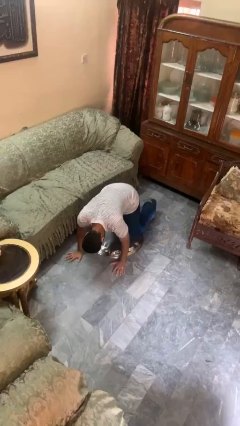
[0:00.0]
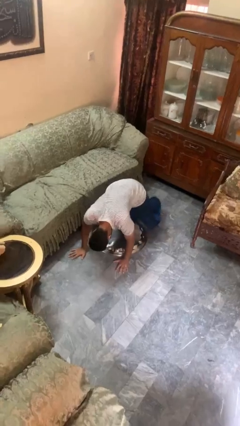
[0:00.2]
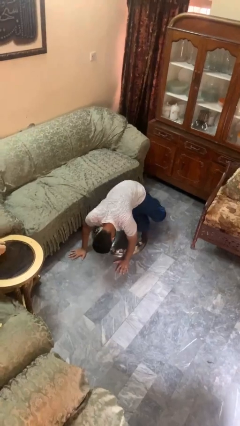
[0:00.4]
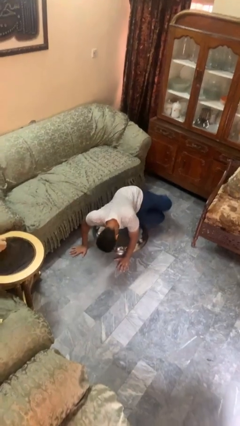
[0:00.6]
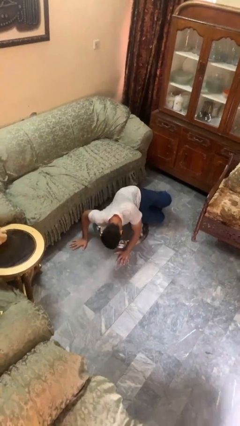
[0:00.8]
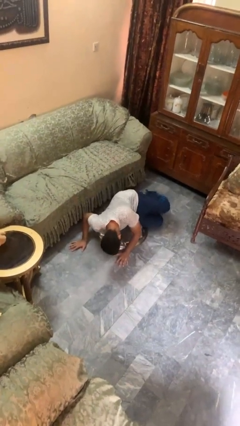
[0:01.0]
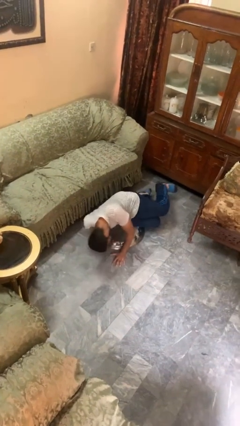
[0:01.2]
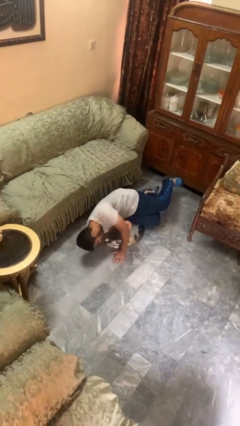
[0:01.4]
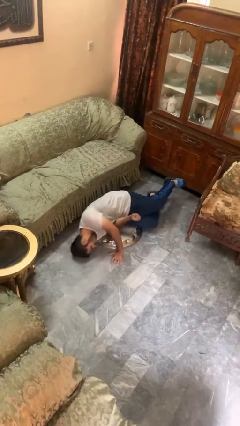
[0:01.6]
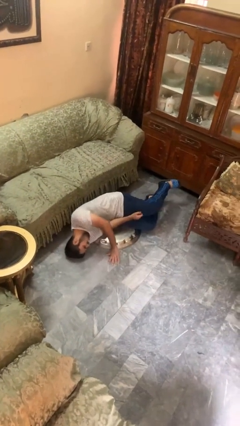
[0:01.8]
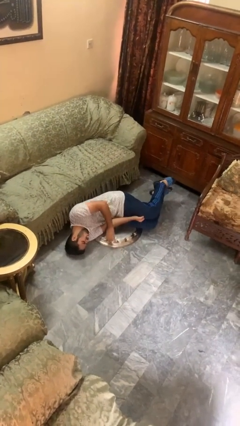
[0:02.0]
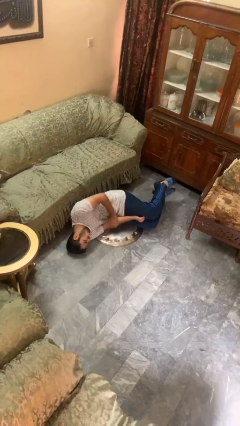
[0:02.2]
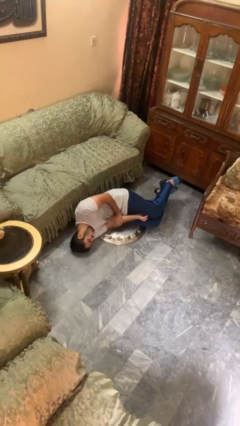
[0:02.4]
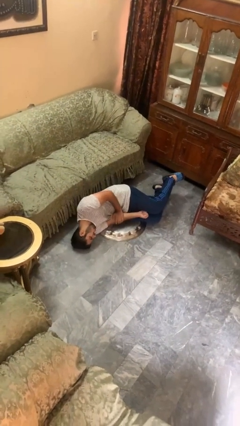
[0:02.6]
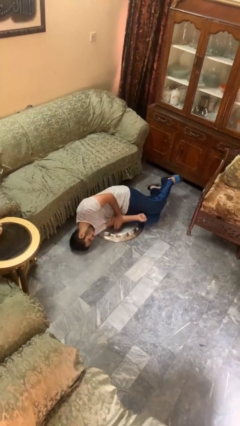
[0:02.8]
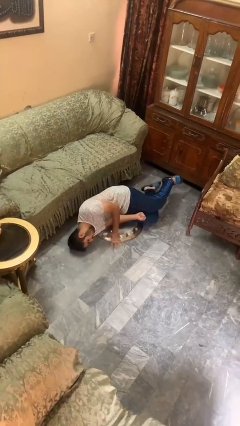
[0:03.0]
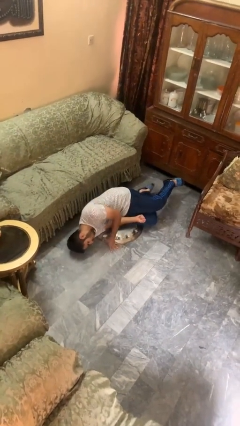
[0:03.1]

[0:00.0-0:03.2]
person lies down on floor

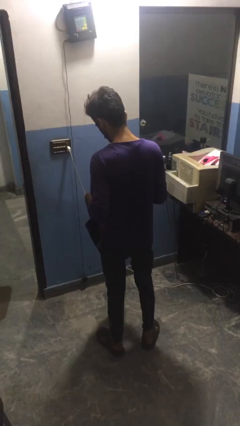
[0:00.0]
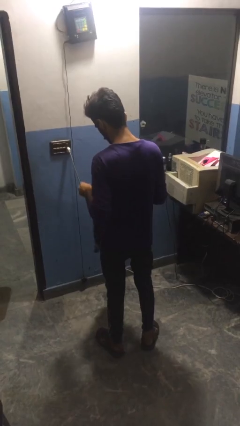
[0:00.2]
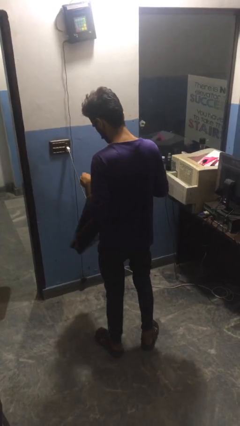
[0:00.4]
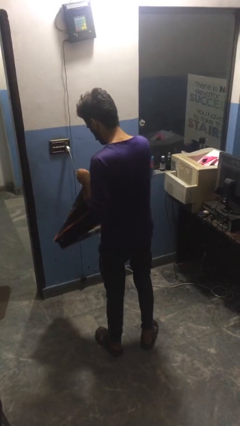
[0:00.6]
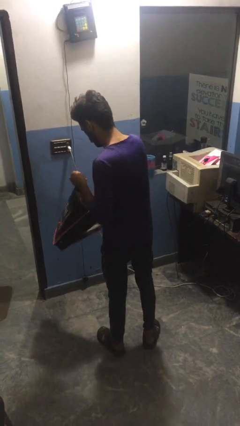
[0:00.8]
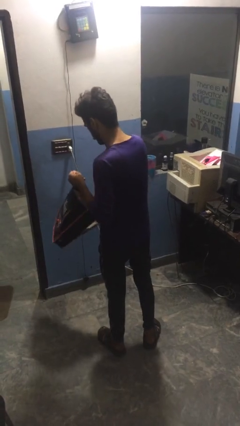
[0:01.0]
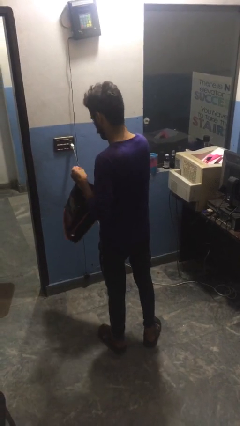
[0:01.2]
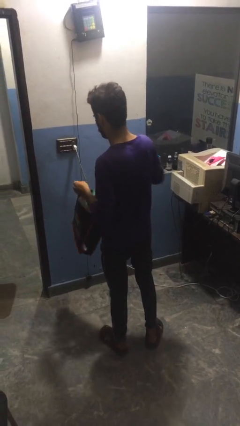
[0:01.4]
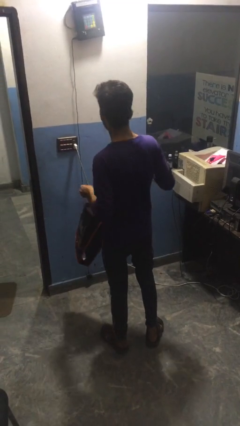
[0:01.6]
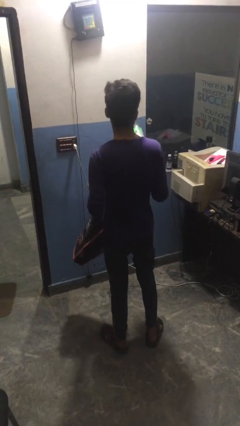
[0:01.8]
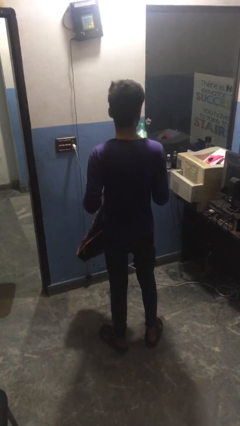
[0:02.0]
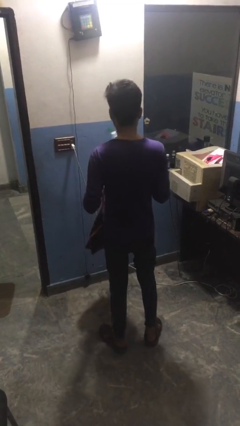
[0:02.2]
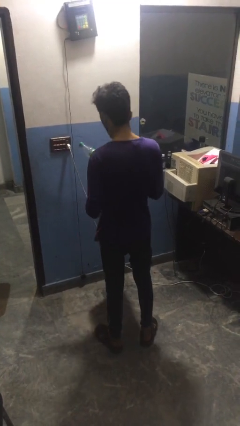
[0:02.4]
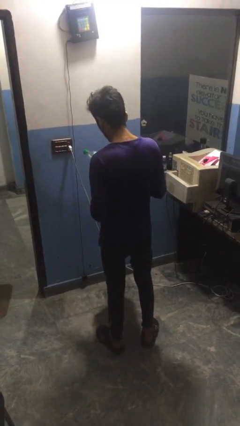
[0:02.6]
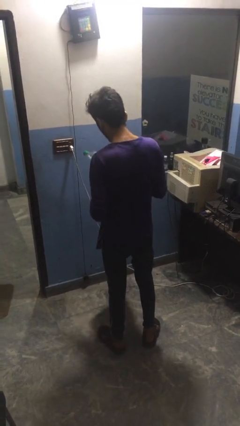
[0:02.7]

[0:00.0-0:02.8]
person takes object from bag

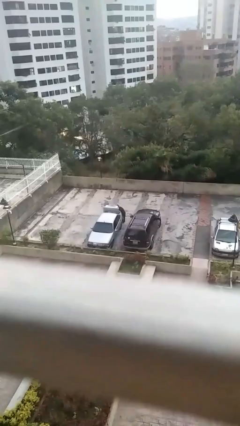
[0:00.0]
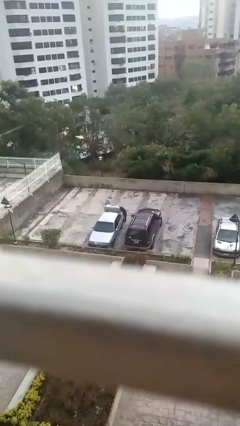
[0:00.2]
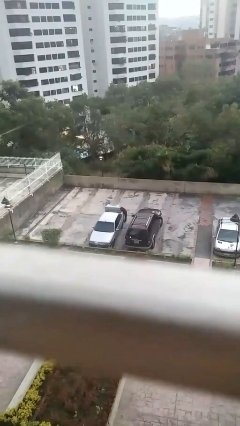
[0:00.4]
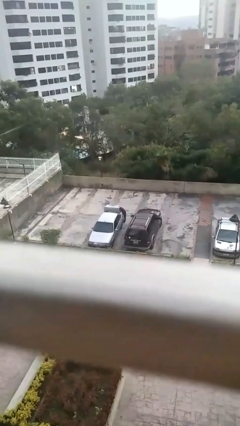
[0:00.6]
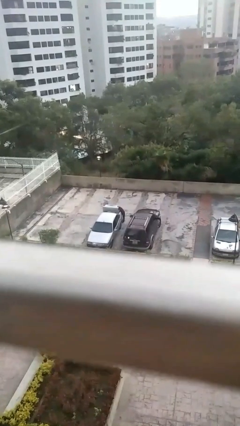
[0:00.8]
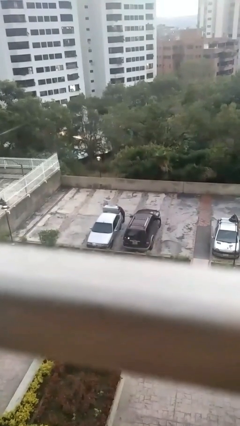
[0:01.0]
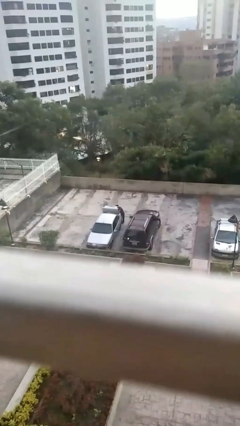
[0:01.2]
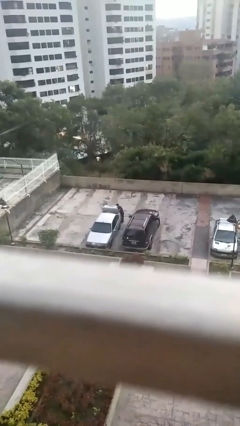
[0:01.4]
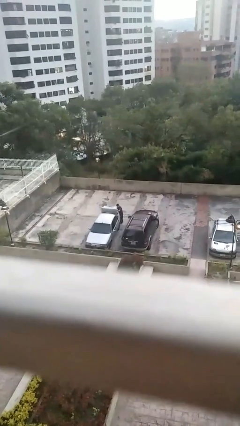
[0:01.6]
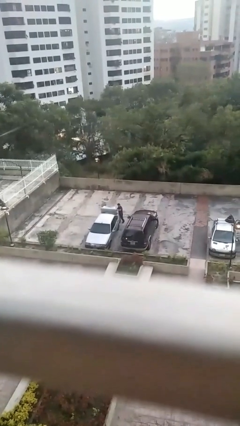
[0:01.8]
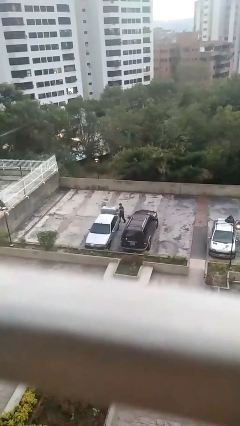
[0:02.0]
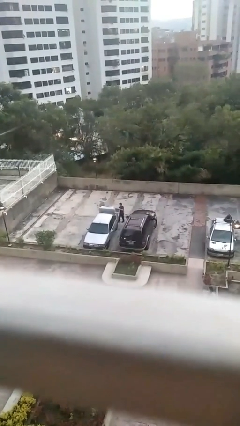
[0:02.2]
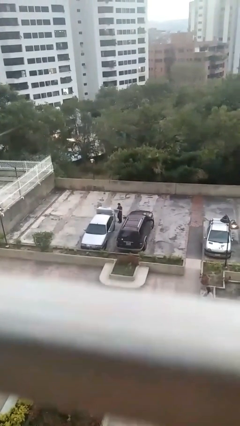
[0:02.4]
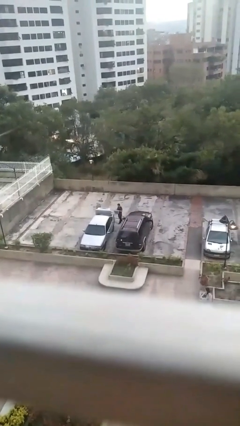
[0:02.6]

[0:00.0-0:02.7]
person unloads car

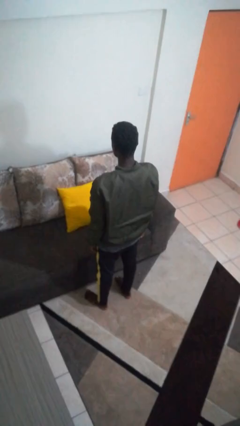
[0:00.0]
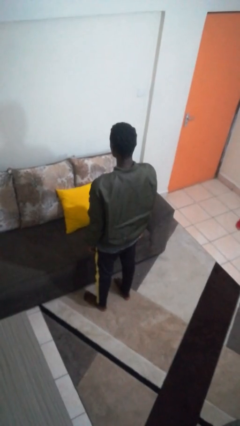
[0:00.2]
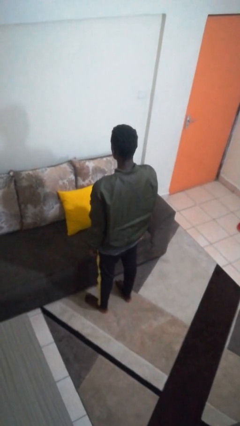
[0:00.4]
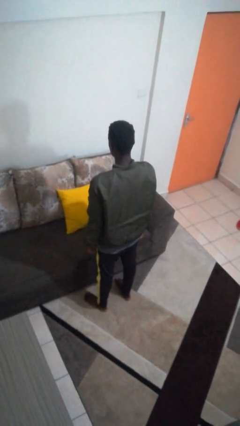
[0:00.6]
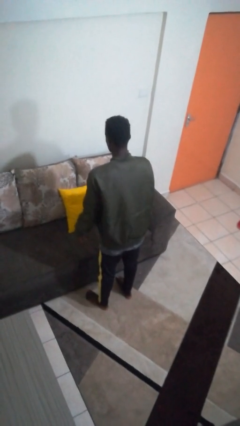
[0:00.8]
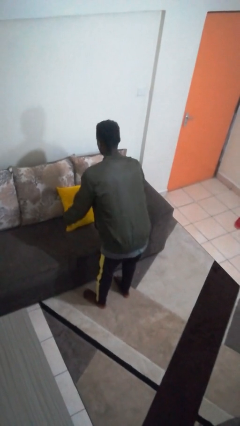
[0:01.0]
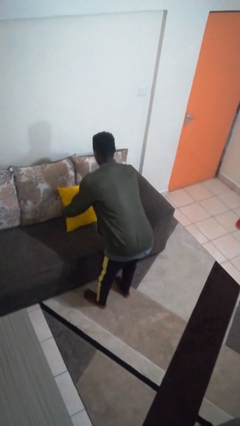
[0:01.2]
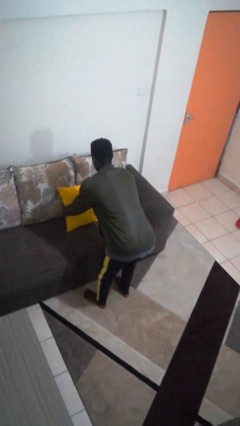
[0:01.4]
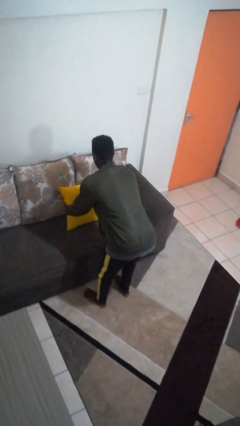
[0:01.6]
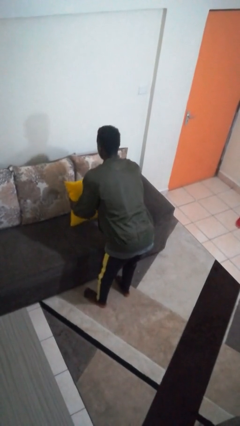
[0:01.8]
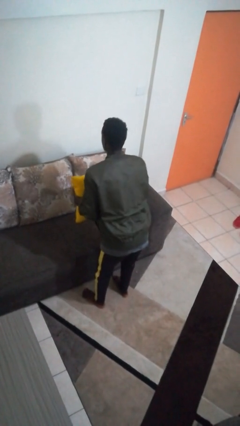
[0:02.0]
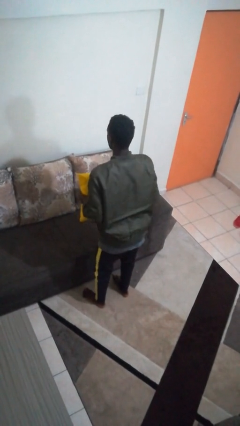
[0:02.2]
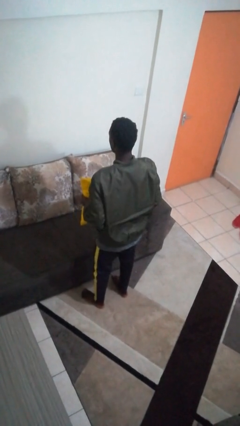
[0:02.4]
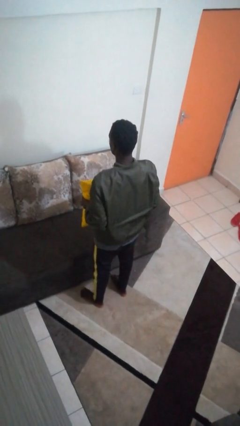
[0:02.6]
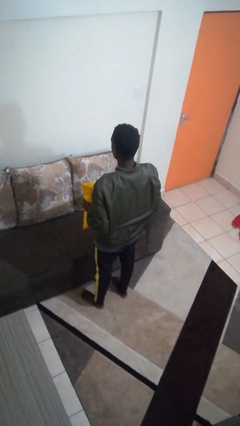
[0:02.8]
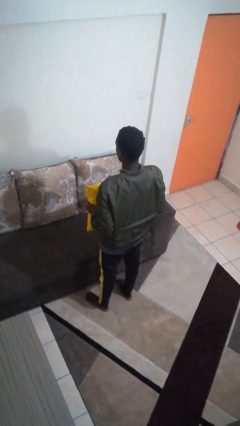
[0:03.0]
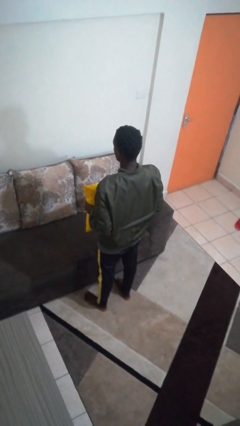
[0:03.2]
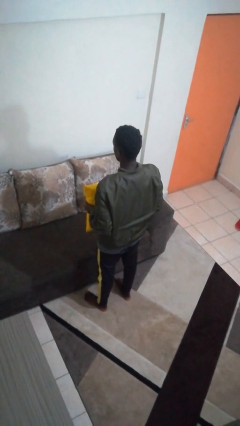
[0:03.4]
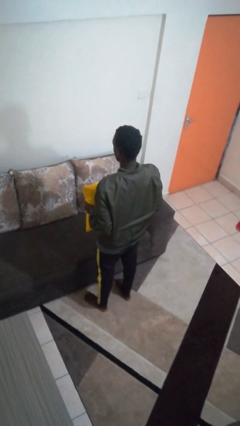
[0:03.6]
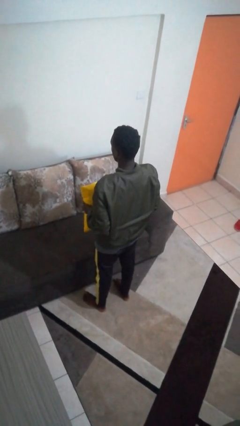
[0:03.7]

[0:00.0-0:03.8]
person picks up object from couch

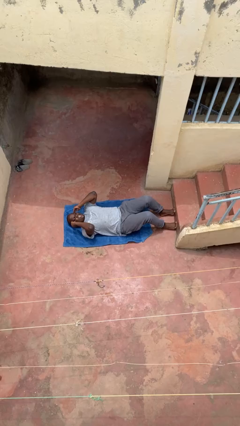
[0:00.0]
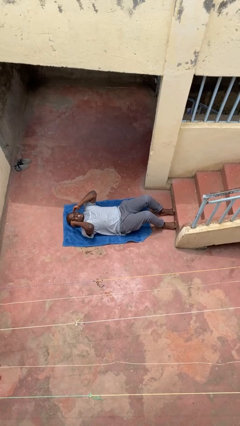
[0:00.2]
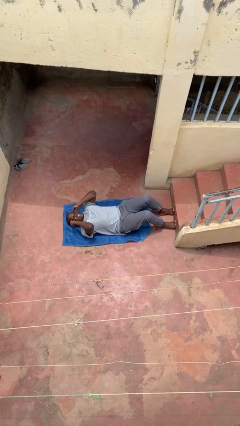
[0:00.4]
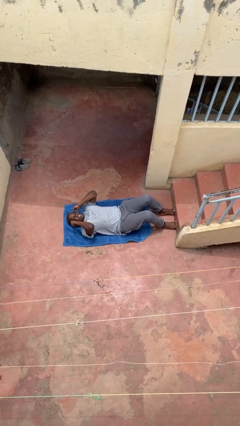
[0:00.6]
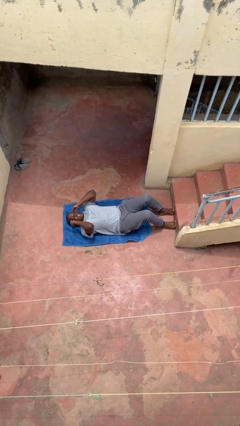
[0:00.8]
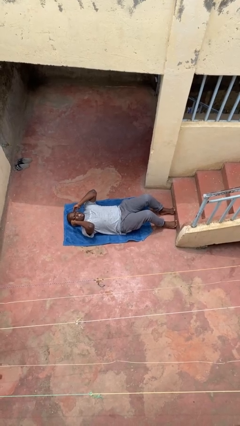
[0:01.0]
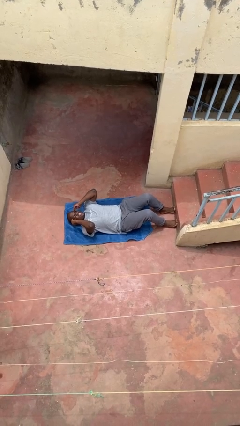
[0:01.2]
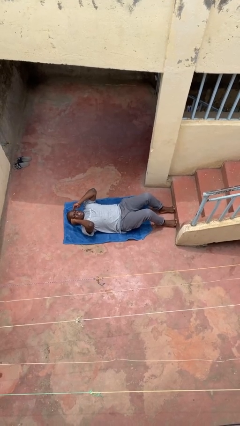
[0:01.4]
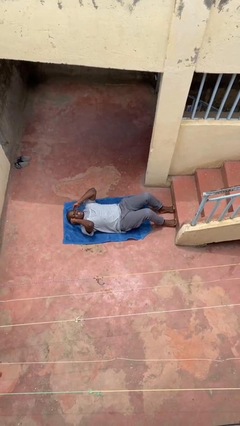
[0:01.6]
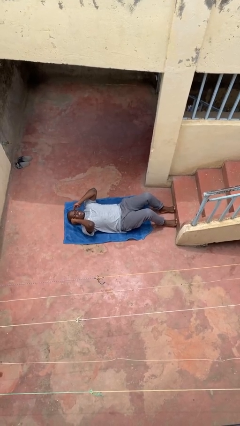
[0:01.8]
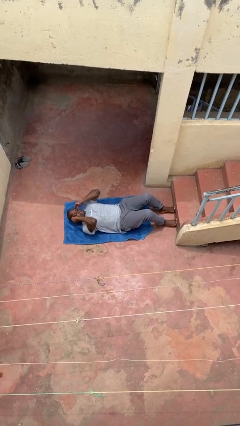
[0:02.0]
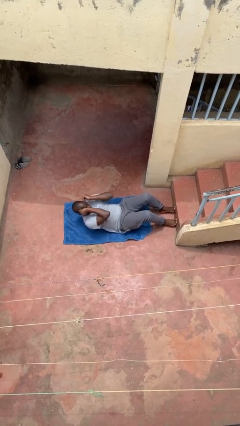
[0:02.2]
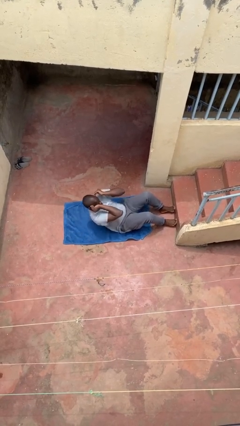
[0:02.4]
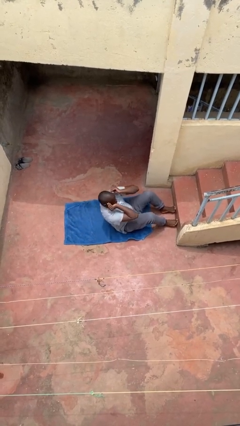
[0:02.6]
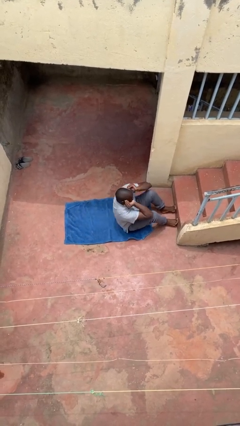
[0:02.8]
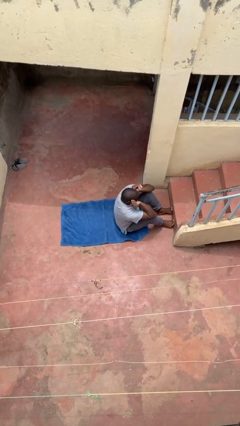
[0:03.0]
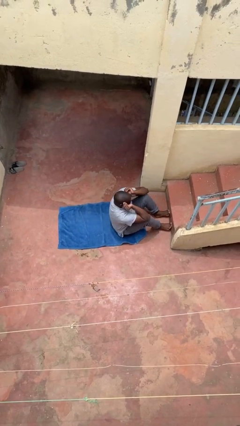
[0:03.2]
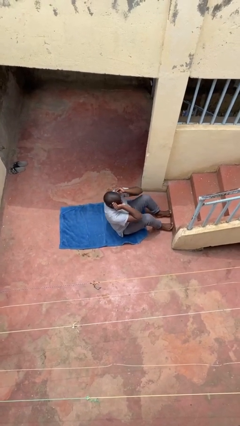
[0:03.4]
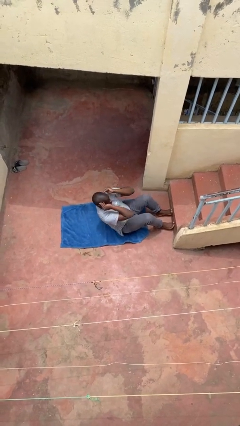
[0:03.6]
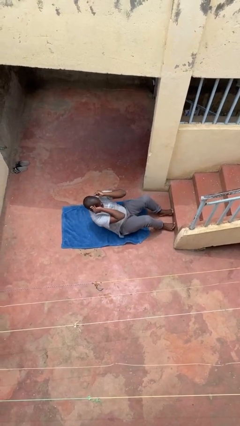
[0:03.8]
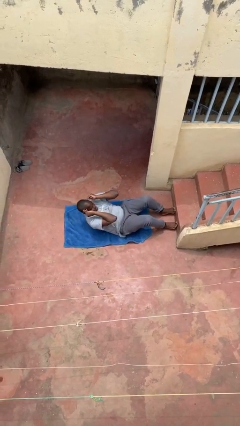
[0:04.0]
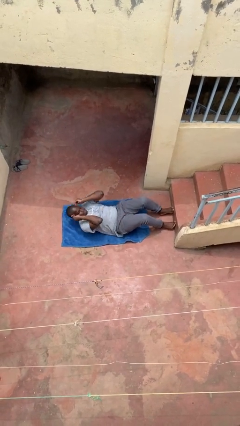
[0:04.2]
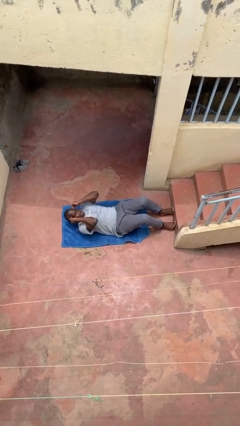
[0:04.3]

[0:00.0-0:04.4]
person exercises with situp

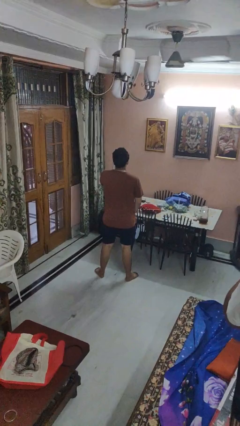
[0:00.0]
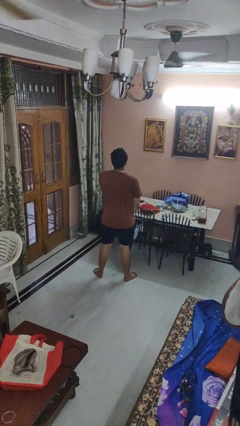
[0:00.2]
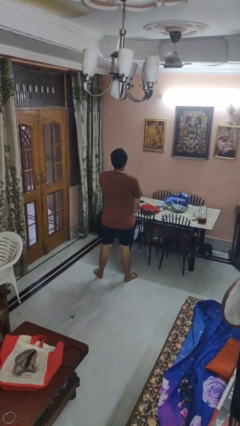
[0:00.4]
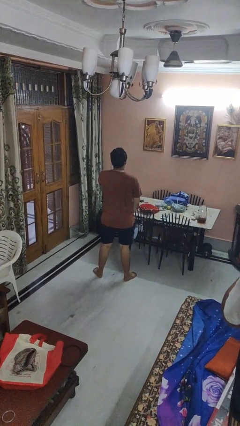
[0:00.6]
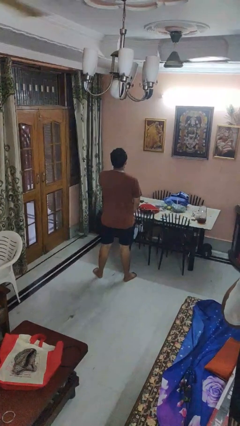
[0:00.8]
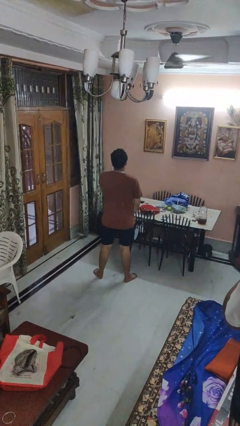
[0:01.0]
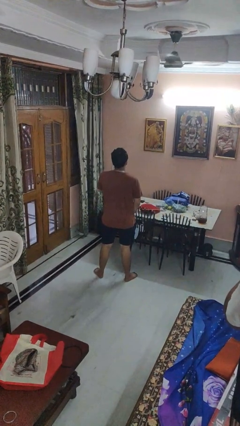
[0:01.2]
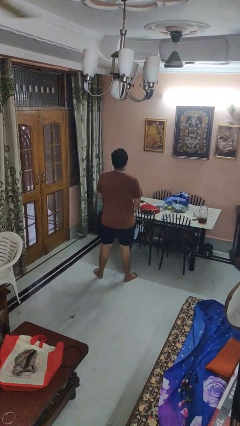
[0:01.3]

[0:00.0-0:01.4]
person gestures be quiet
